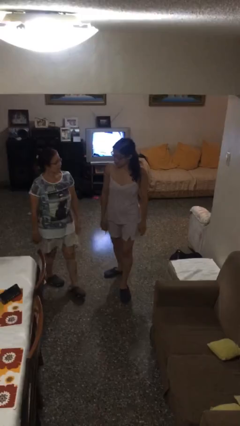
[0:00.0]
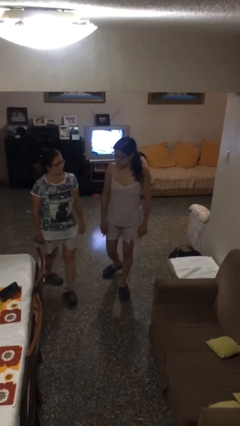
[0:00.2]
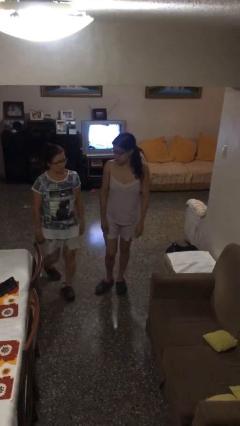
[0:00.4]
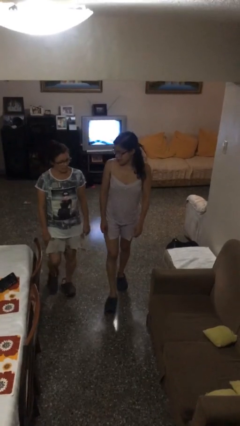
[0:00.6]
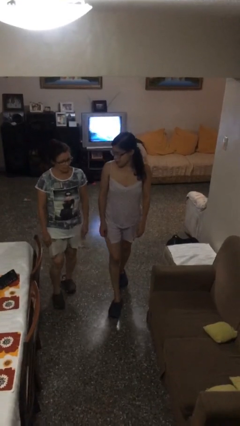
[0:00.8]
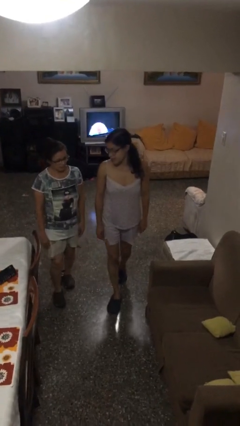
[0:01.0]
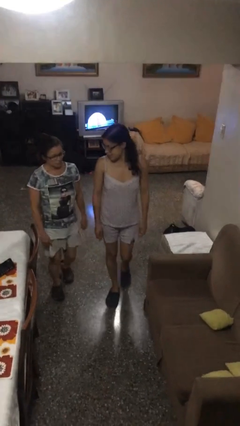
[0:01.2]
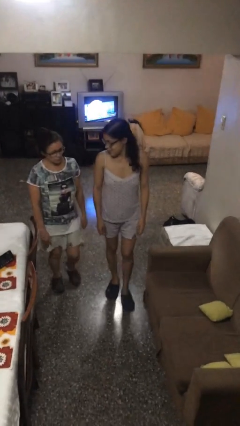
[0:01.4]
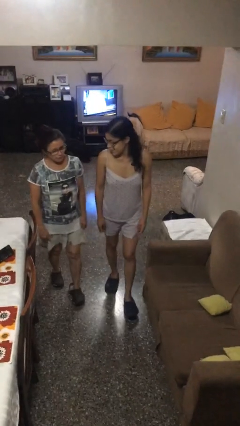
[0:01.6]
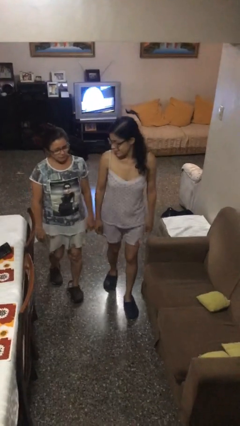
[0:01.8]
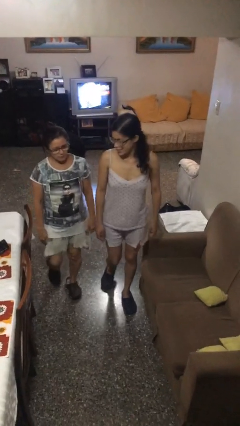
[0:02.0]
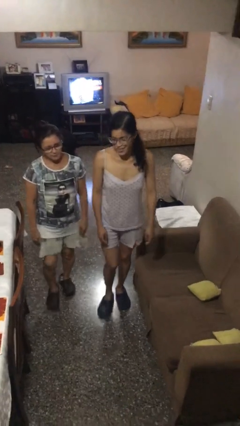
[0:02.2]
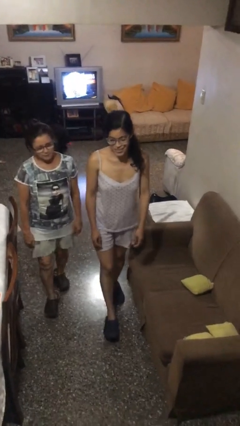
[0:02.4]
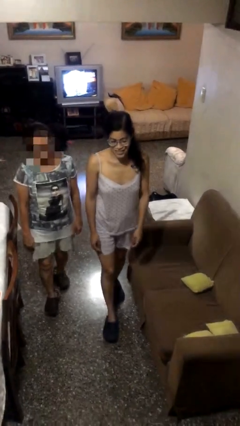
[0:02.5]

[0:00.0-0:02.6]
person talks to person

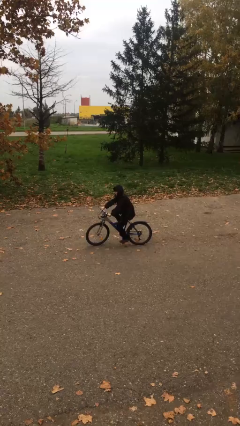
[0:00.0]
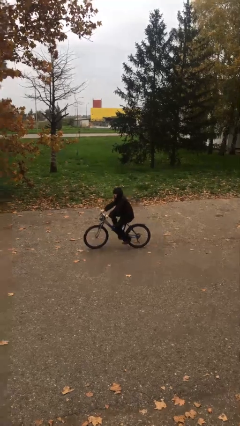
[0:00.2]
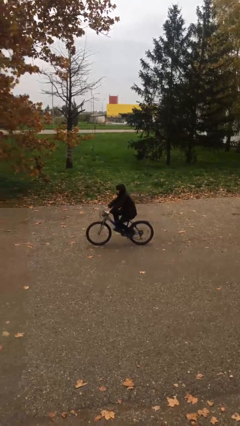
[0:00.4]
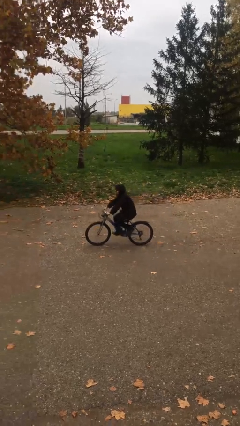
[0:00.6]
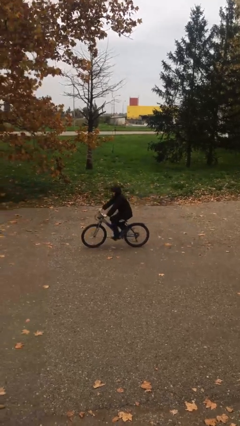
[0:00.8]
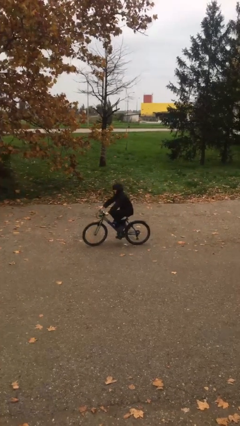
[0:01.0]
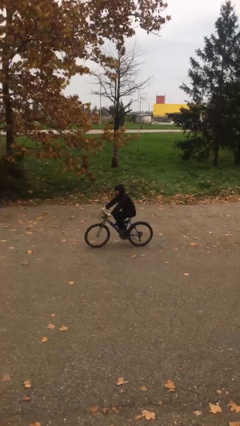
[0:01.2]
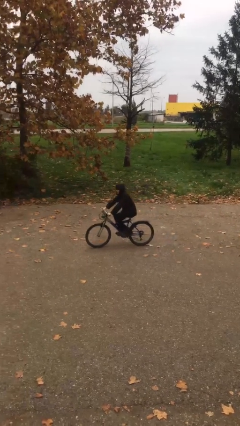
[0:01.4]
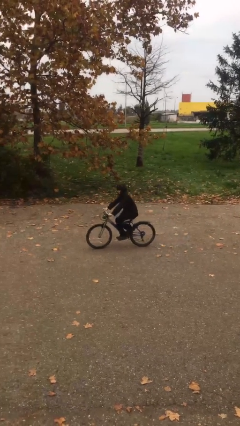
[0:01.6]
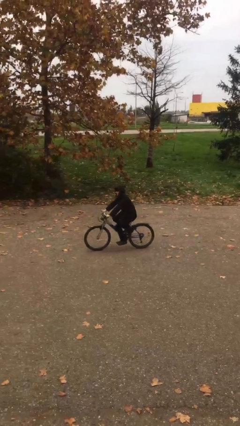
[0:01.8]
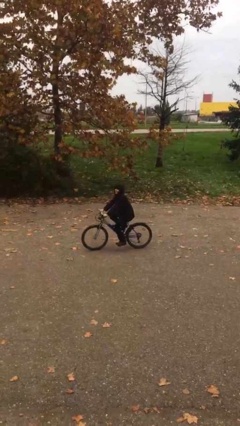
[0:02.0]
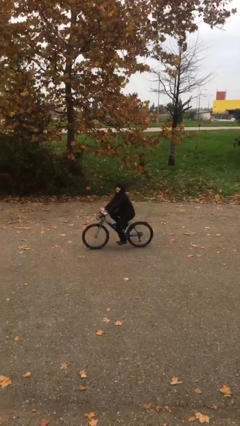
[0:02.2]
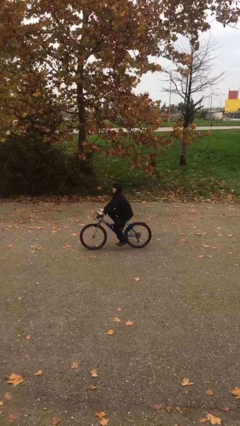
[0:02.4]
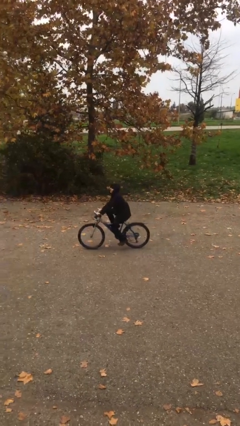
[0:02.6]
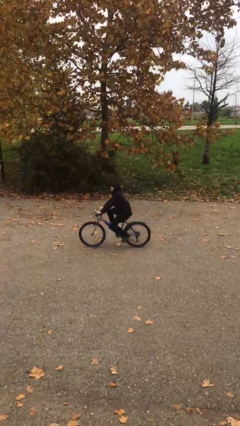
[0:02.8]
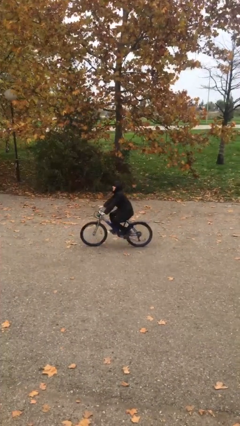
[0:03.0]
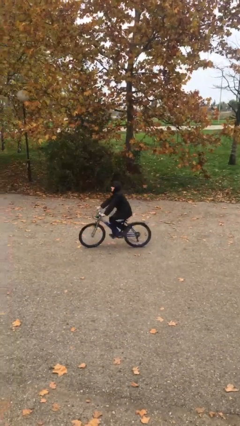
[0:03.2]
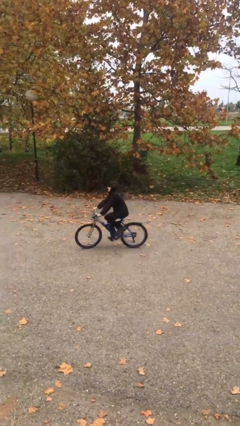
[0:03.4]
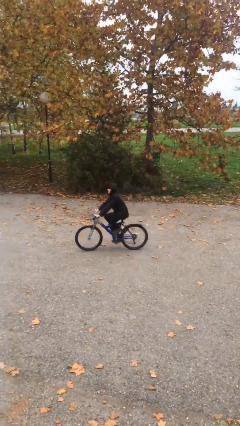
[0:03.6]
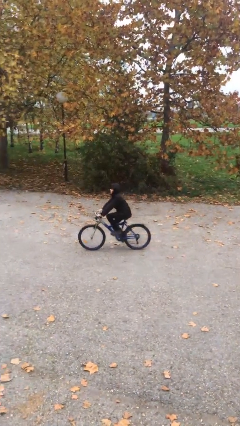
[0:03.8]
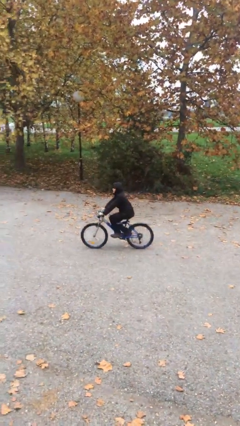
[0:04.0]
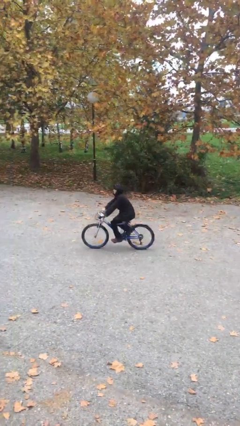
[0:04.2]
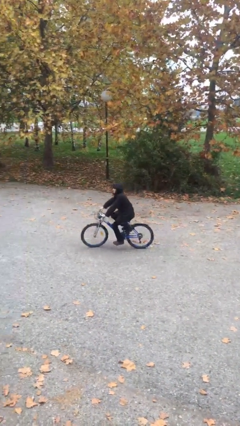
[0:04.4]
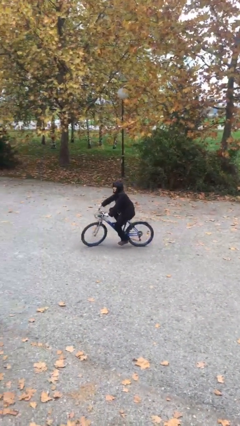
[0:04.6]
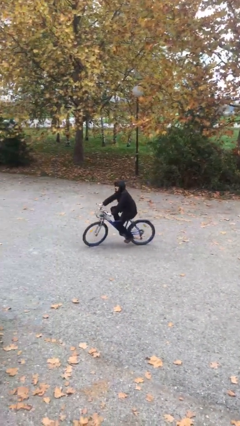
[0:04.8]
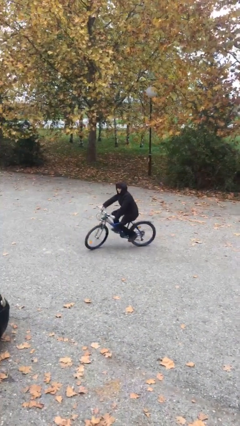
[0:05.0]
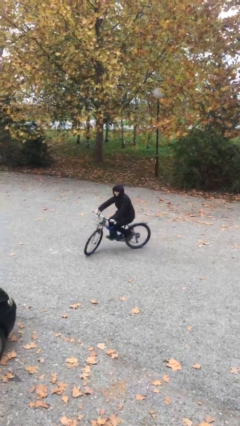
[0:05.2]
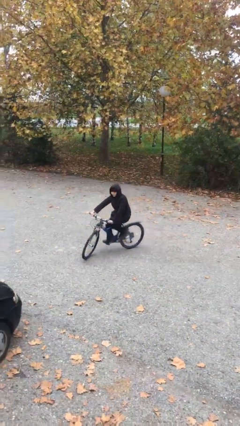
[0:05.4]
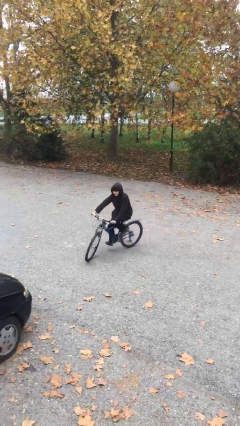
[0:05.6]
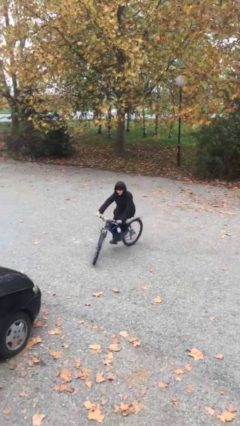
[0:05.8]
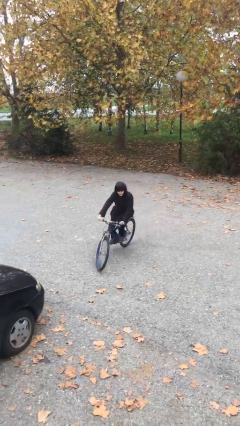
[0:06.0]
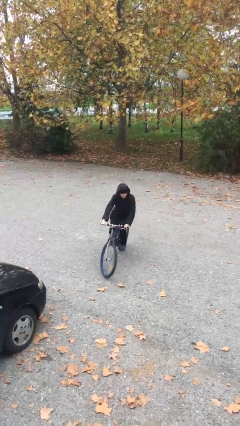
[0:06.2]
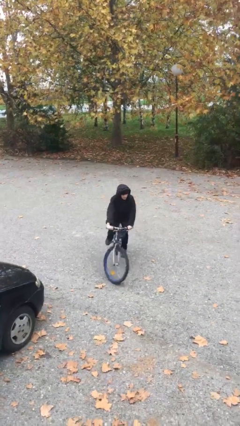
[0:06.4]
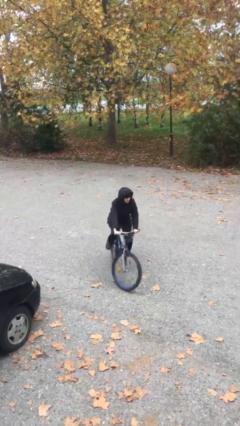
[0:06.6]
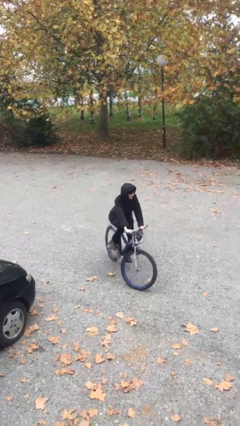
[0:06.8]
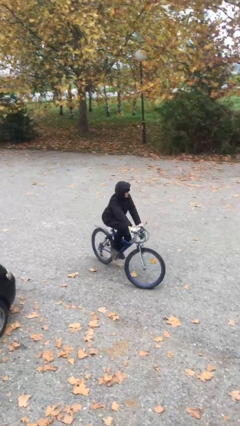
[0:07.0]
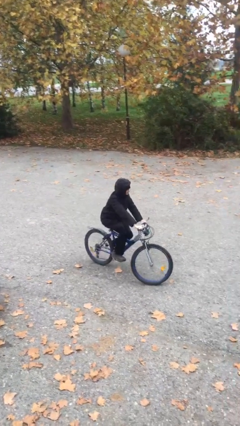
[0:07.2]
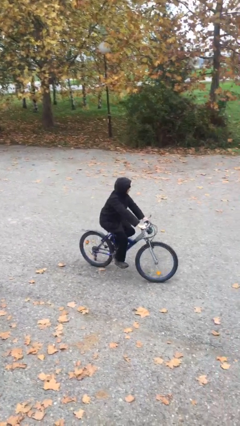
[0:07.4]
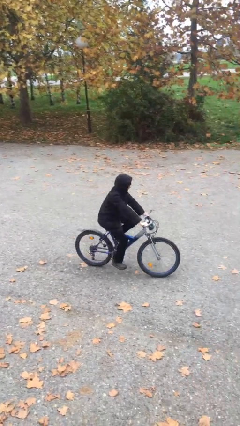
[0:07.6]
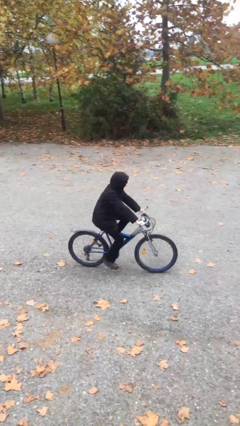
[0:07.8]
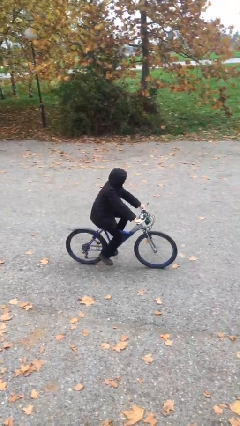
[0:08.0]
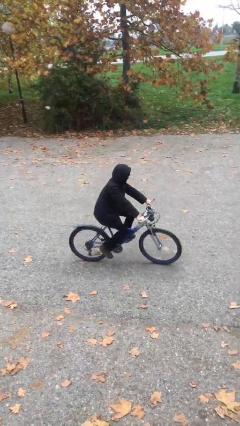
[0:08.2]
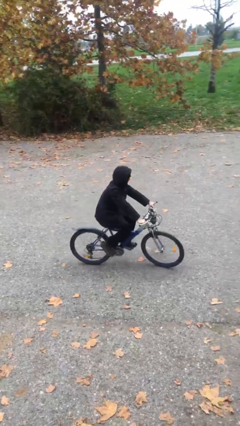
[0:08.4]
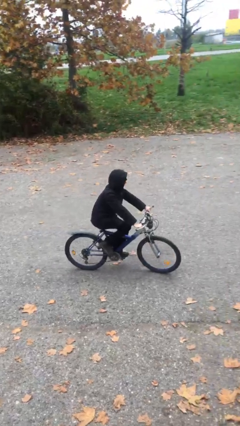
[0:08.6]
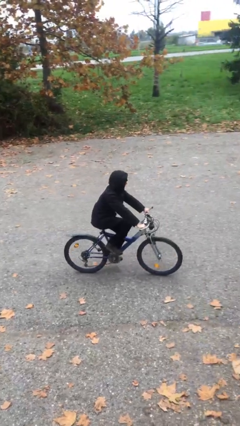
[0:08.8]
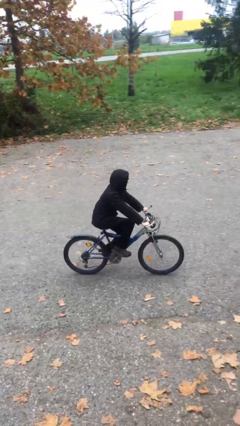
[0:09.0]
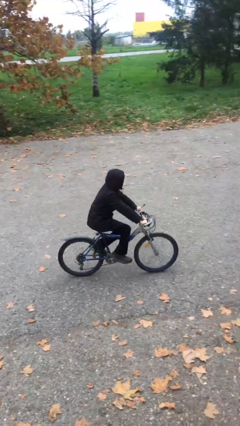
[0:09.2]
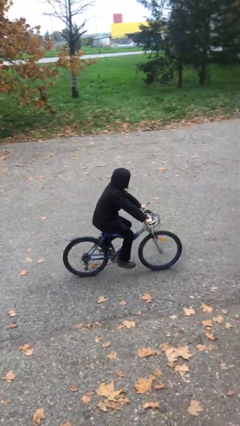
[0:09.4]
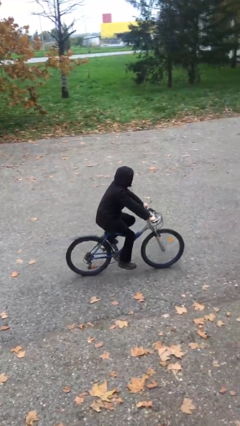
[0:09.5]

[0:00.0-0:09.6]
person rides bicycle

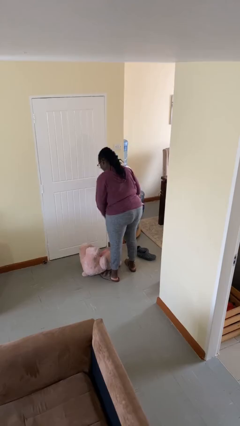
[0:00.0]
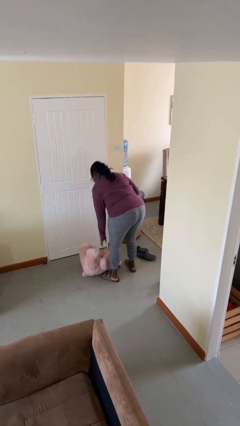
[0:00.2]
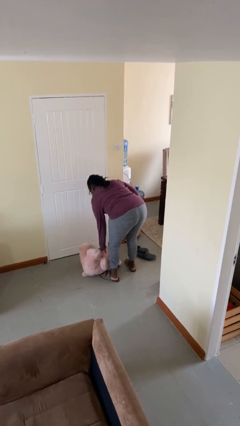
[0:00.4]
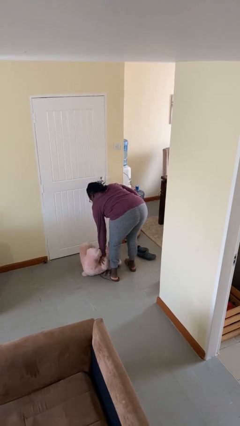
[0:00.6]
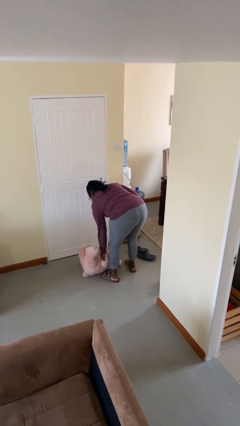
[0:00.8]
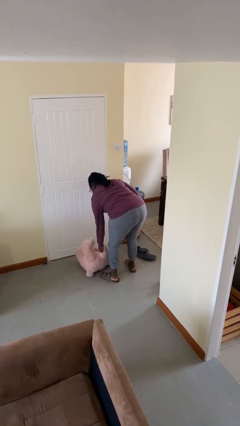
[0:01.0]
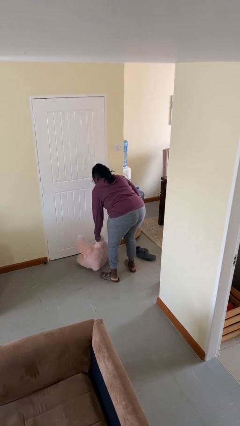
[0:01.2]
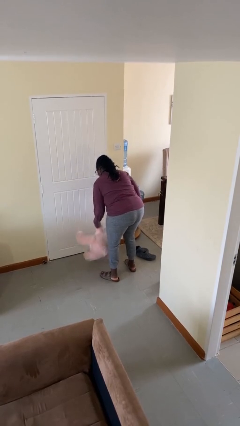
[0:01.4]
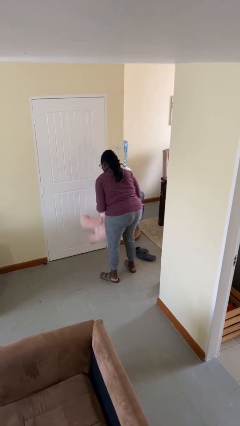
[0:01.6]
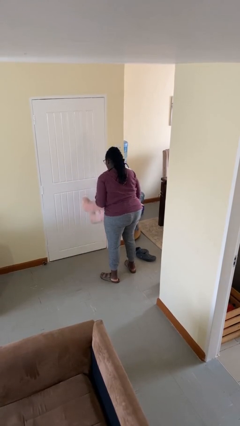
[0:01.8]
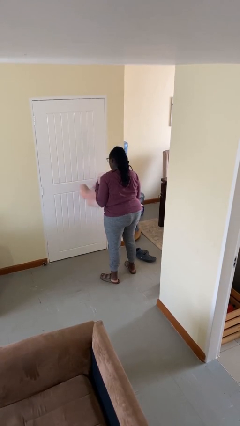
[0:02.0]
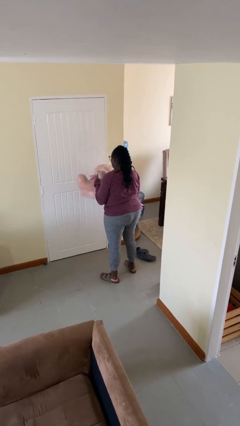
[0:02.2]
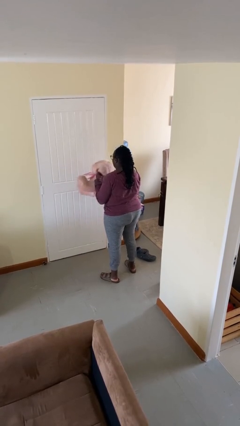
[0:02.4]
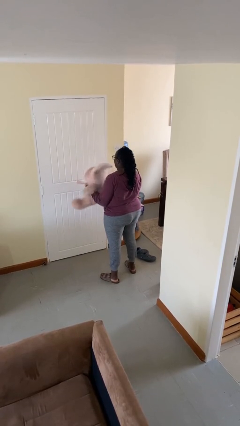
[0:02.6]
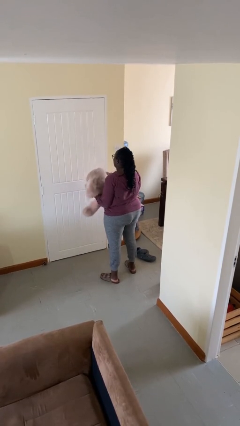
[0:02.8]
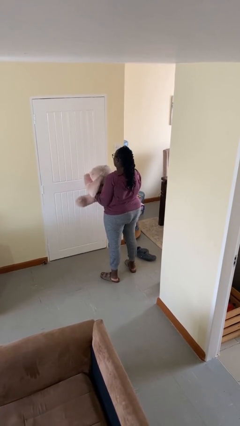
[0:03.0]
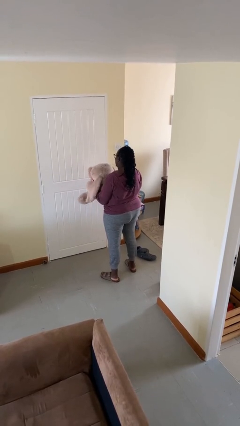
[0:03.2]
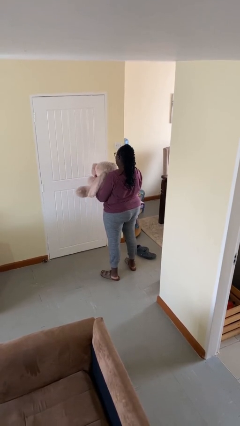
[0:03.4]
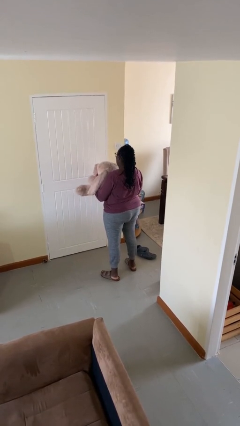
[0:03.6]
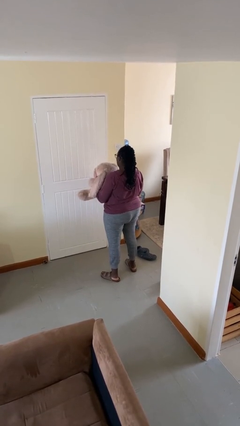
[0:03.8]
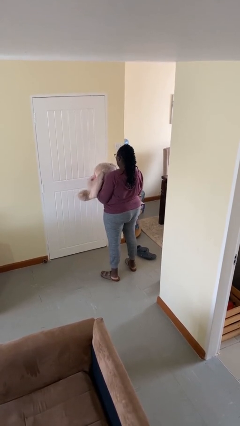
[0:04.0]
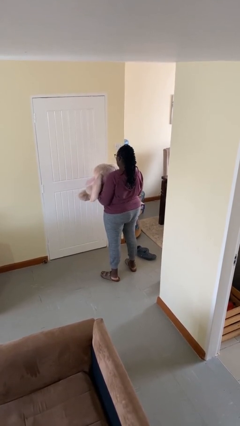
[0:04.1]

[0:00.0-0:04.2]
person picks up object from floor

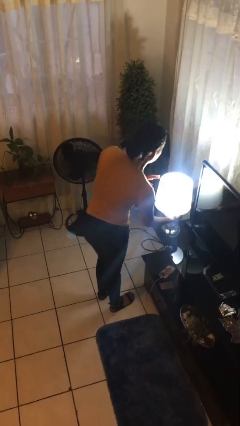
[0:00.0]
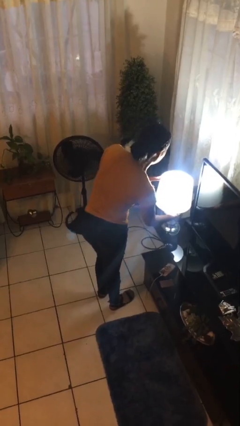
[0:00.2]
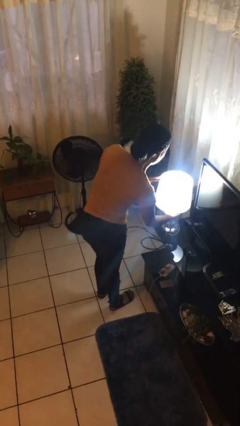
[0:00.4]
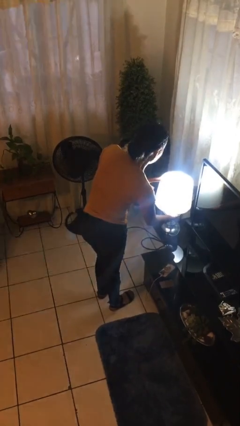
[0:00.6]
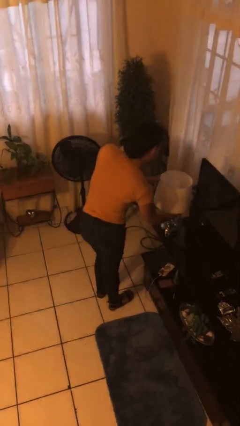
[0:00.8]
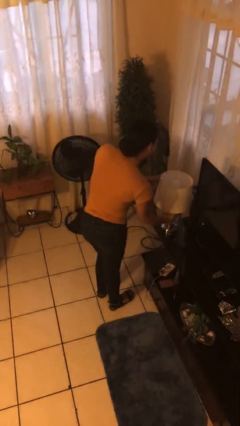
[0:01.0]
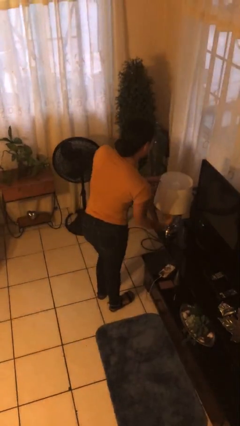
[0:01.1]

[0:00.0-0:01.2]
person turns off lamp

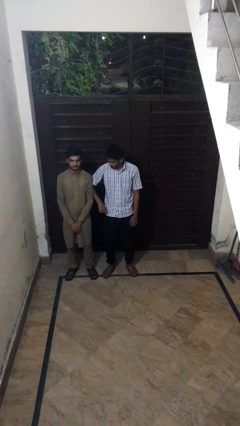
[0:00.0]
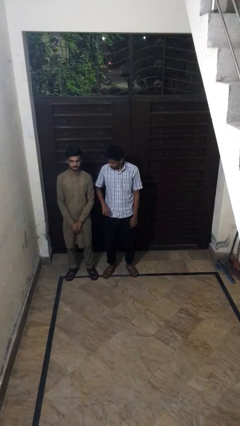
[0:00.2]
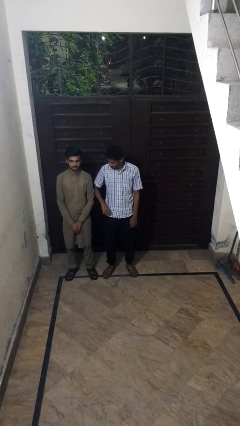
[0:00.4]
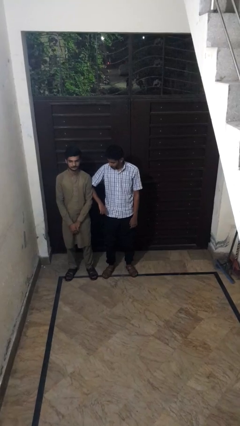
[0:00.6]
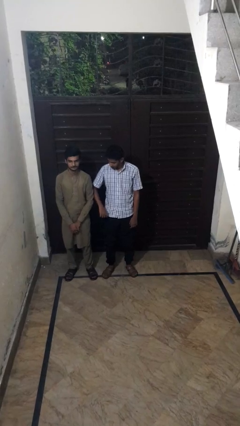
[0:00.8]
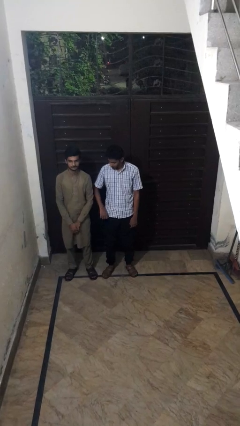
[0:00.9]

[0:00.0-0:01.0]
person nudges person with elbow
